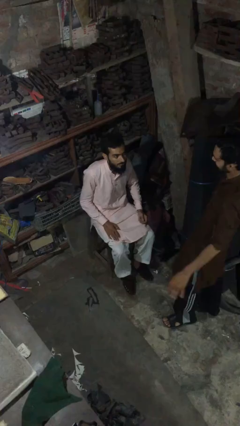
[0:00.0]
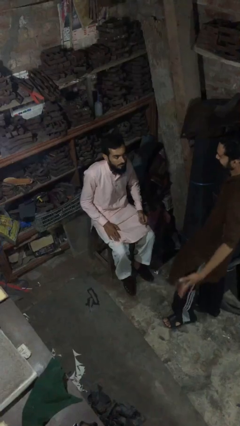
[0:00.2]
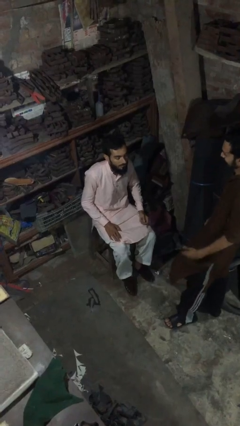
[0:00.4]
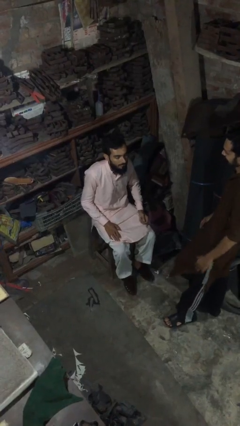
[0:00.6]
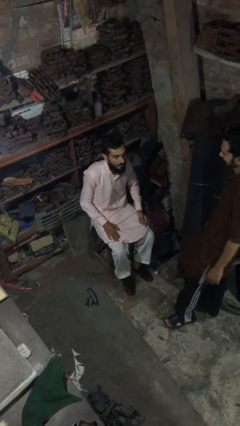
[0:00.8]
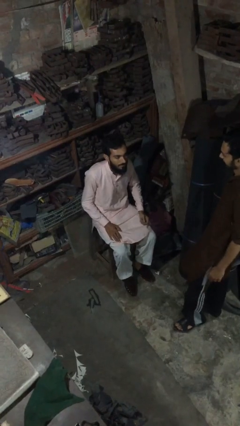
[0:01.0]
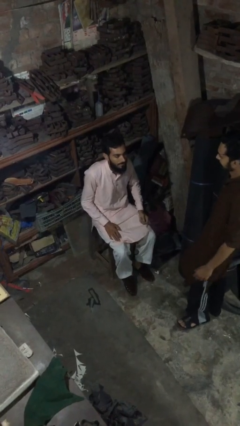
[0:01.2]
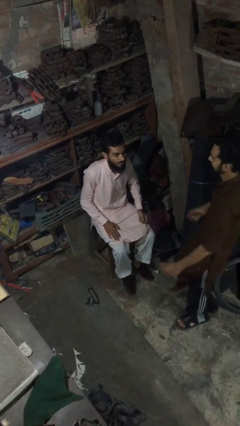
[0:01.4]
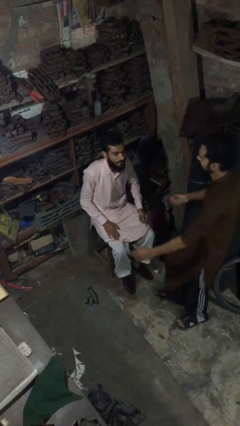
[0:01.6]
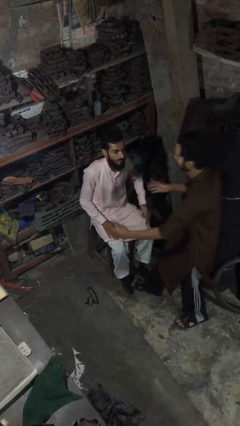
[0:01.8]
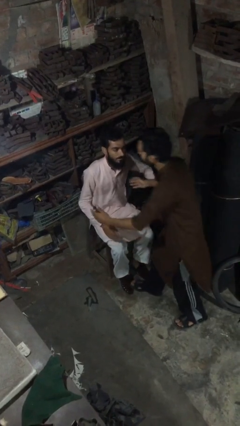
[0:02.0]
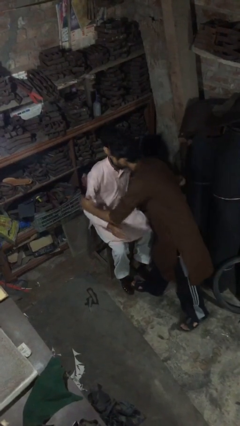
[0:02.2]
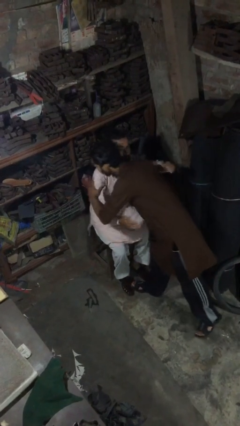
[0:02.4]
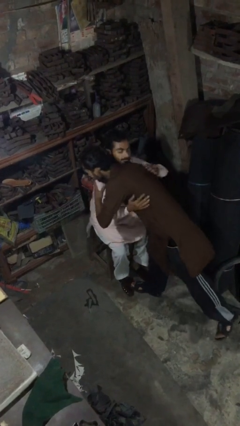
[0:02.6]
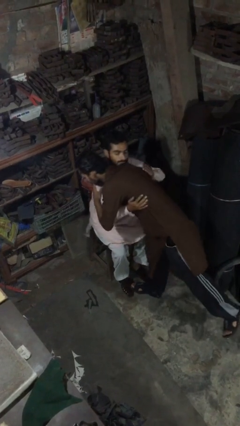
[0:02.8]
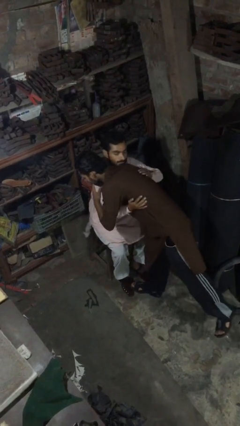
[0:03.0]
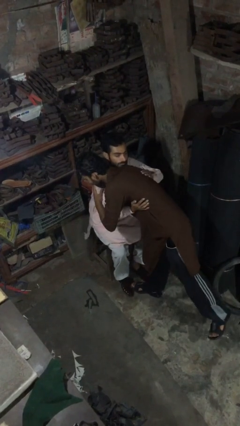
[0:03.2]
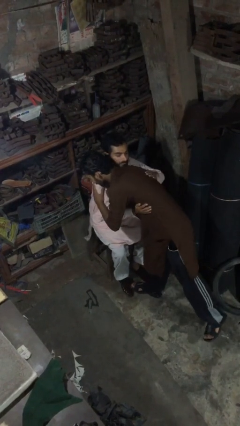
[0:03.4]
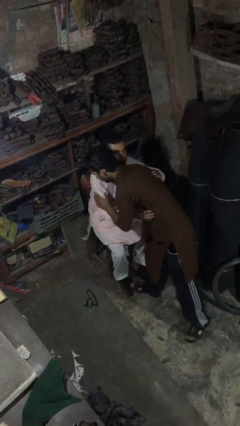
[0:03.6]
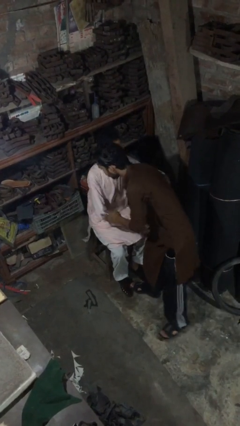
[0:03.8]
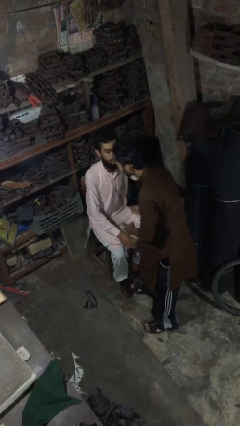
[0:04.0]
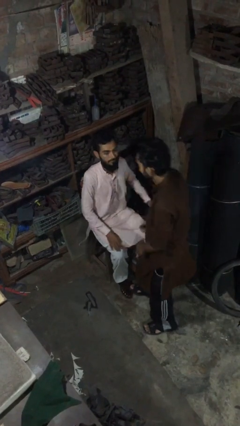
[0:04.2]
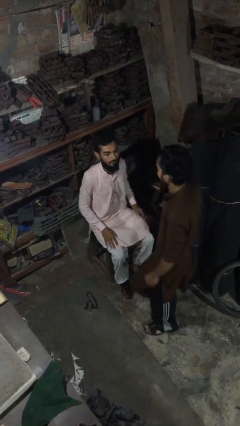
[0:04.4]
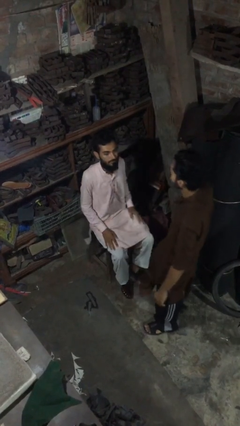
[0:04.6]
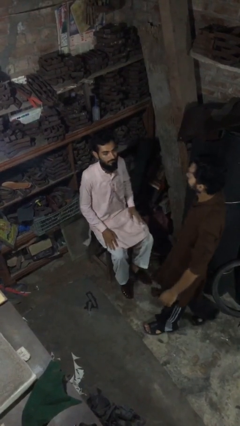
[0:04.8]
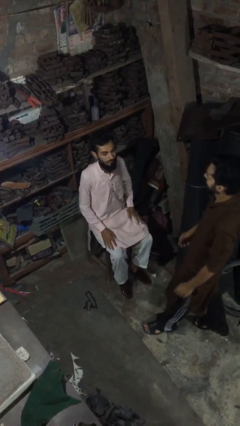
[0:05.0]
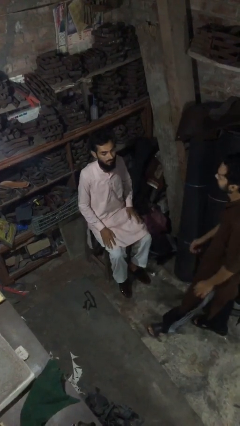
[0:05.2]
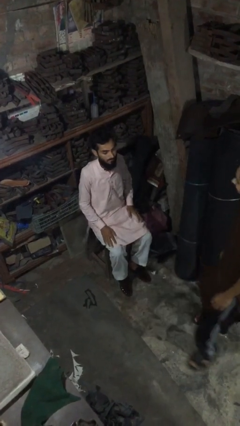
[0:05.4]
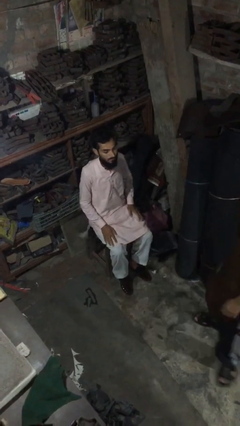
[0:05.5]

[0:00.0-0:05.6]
person embraces person

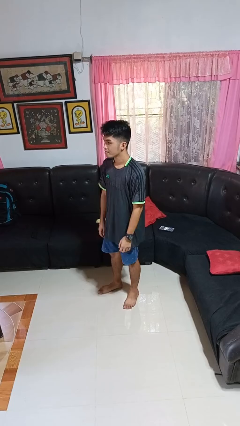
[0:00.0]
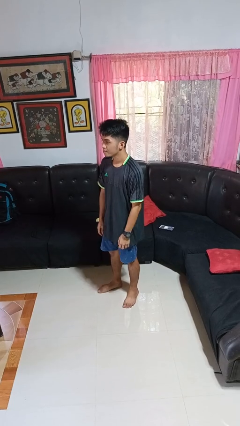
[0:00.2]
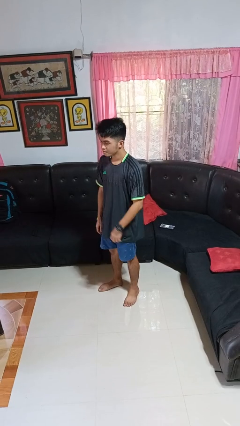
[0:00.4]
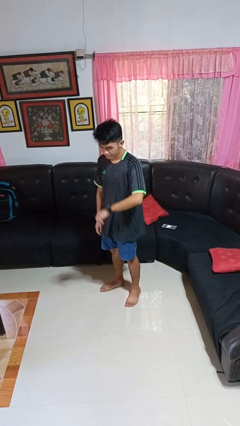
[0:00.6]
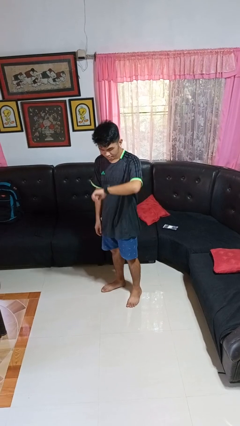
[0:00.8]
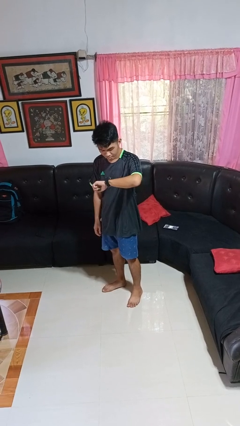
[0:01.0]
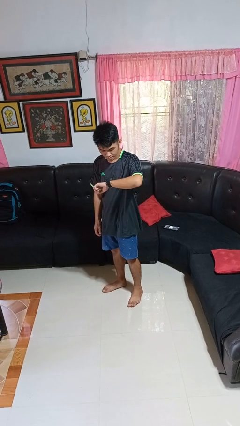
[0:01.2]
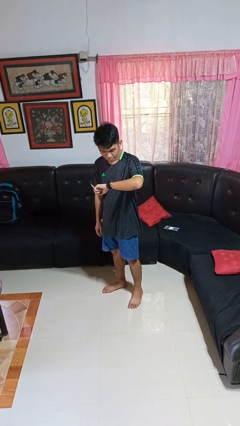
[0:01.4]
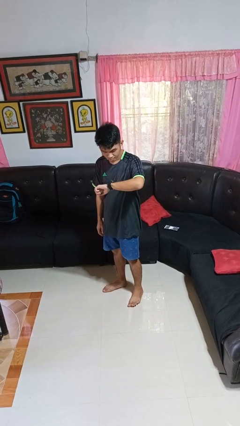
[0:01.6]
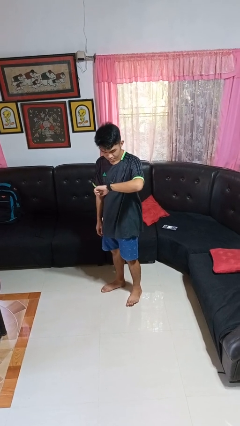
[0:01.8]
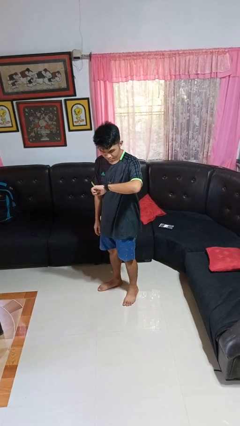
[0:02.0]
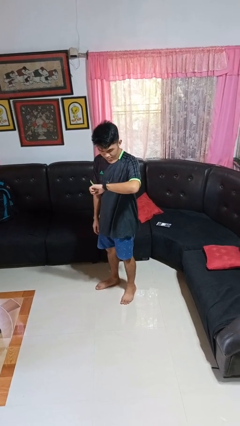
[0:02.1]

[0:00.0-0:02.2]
person looks at wristwatch

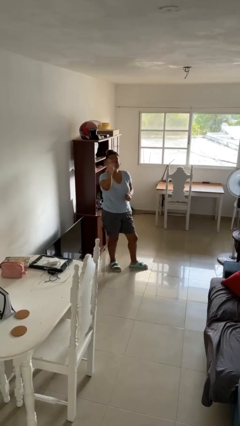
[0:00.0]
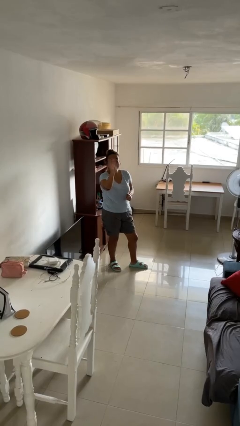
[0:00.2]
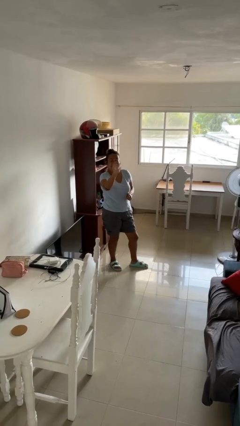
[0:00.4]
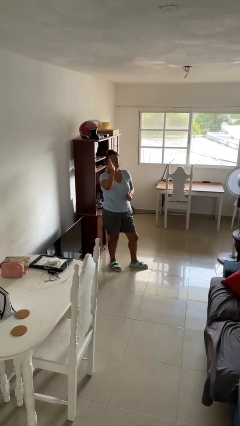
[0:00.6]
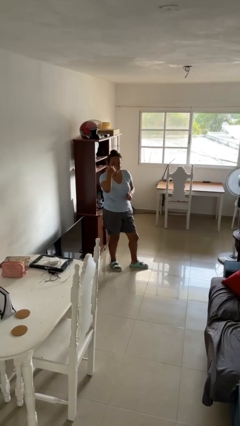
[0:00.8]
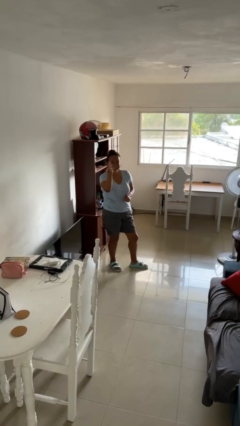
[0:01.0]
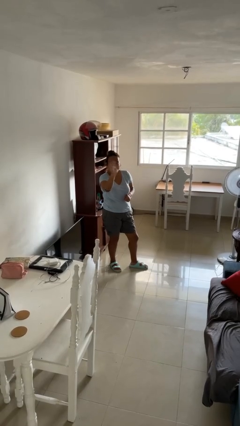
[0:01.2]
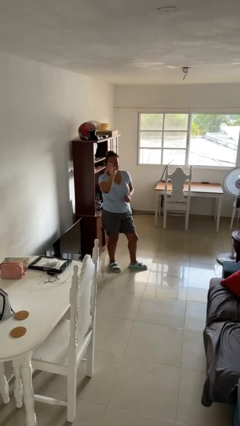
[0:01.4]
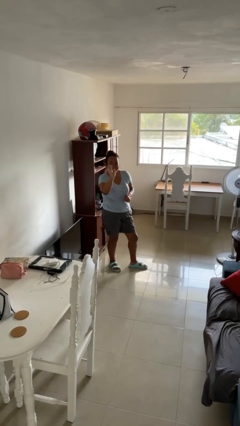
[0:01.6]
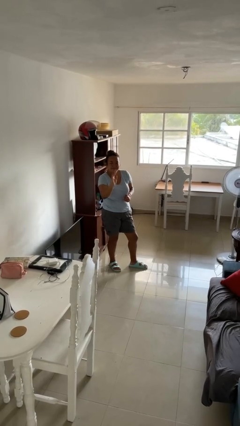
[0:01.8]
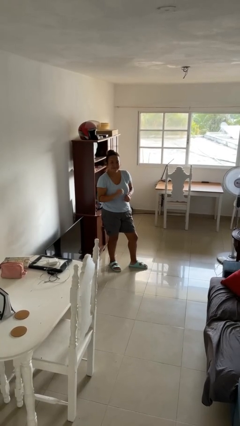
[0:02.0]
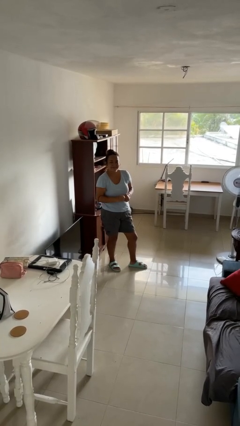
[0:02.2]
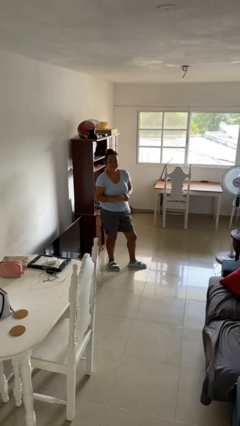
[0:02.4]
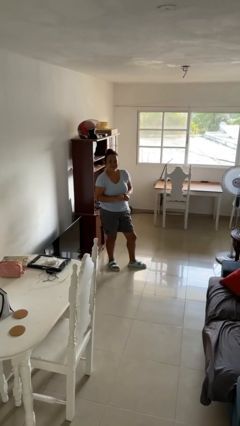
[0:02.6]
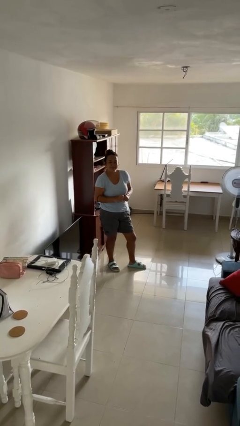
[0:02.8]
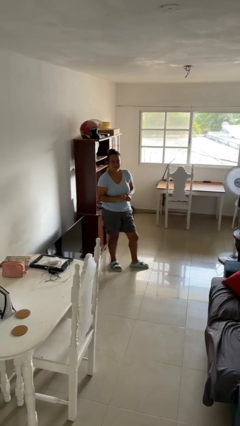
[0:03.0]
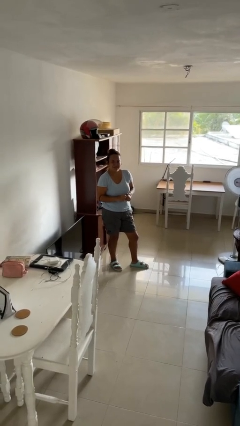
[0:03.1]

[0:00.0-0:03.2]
person waves at person

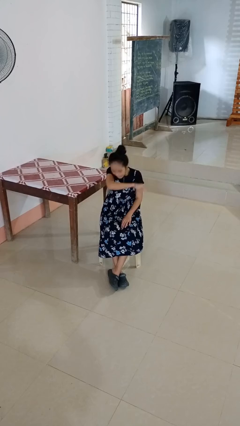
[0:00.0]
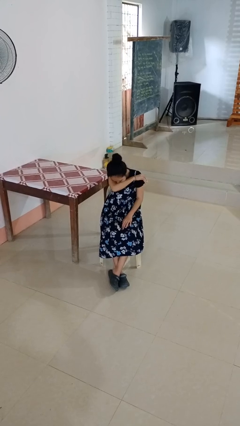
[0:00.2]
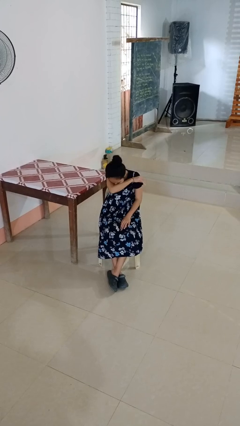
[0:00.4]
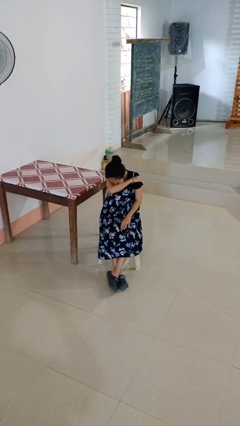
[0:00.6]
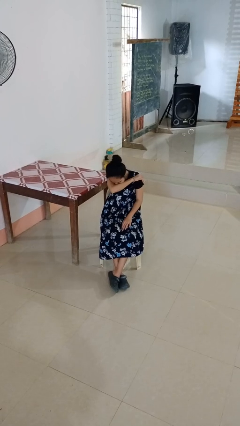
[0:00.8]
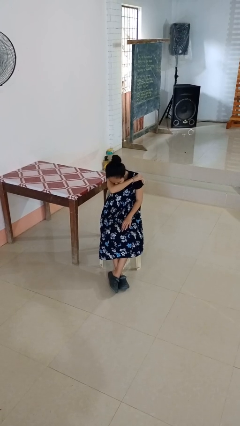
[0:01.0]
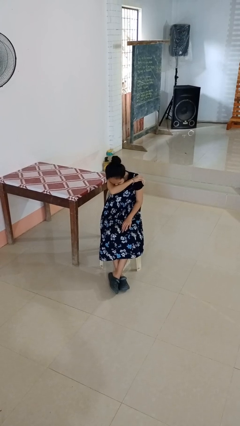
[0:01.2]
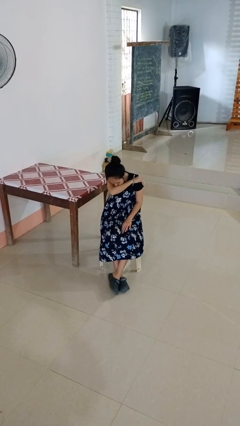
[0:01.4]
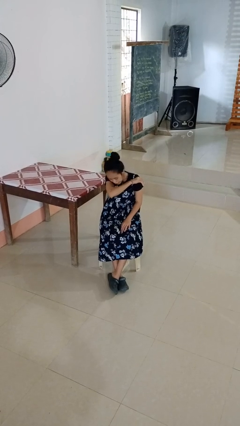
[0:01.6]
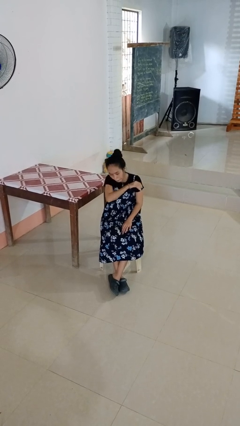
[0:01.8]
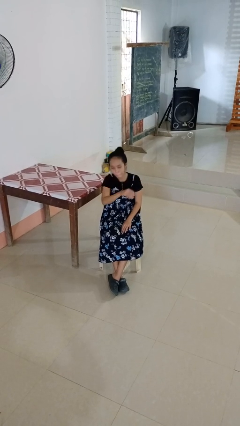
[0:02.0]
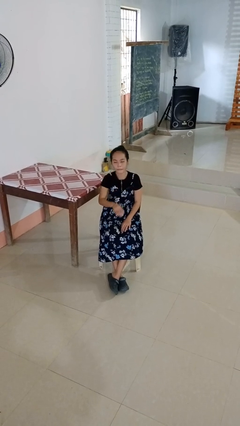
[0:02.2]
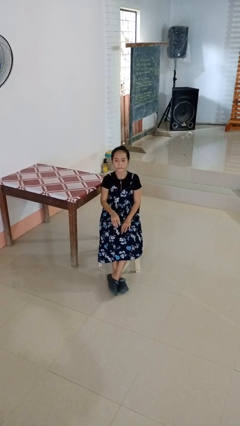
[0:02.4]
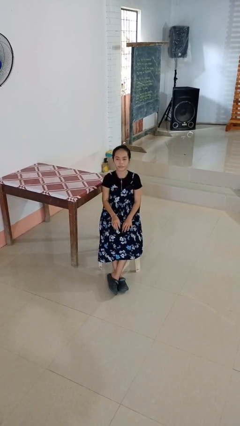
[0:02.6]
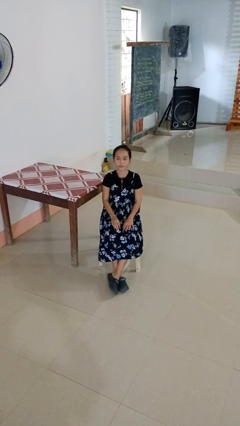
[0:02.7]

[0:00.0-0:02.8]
person sneezes into arm

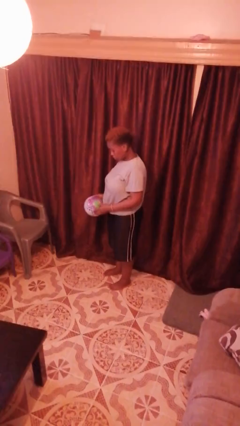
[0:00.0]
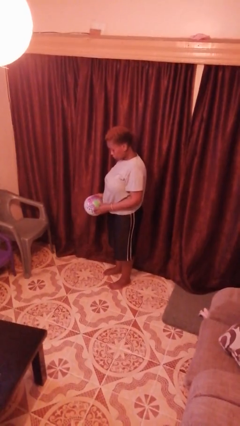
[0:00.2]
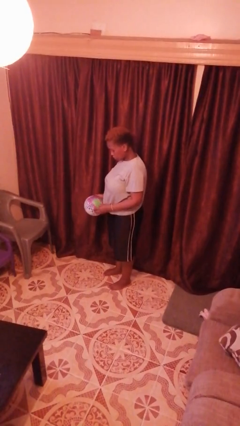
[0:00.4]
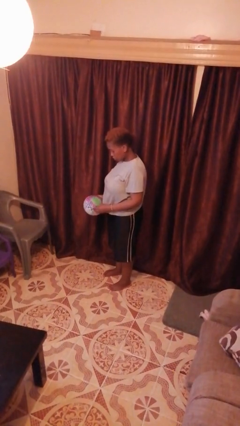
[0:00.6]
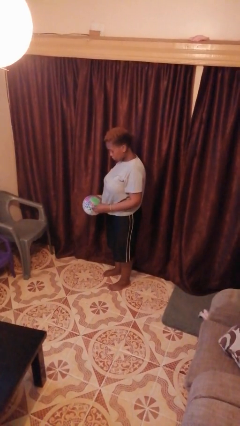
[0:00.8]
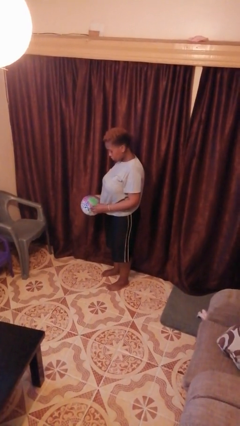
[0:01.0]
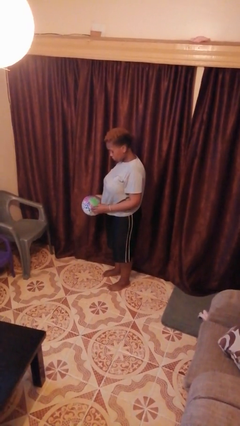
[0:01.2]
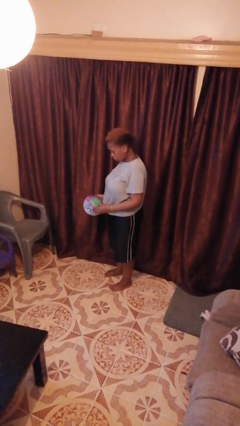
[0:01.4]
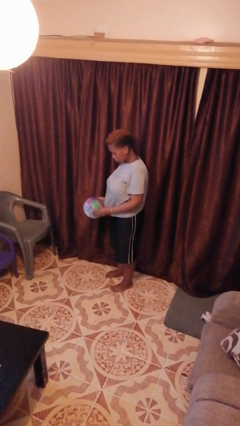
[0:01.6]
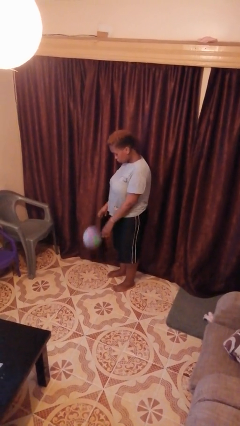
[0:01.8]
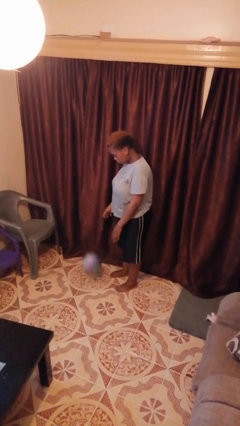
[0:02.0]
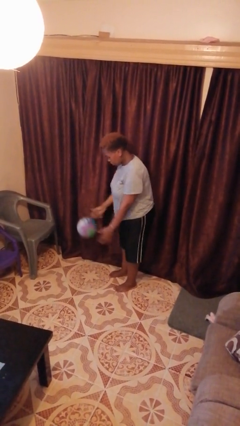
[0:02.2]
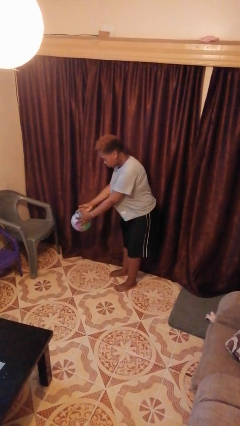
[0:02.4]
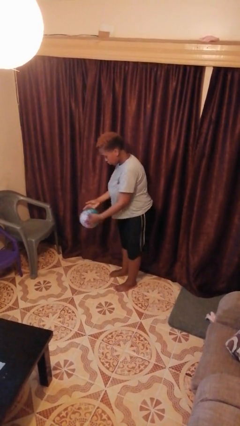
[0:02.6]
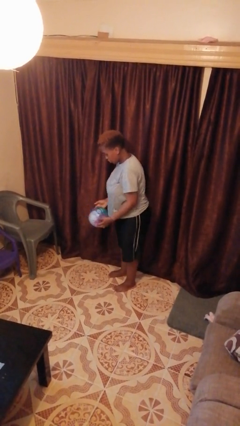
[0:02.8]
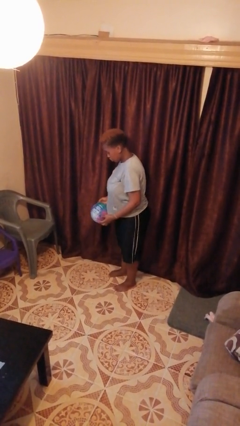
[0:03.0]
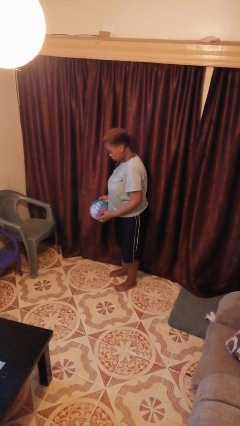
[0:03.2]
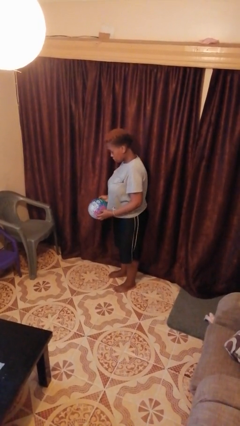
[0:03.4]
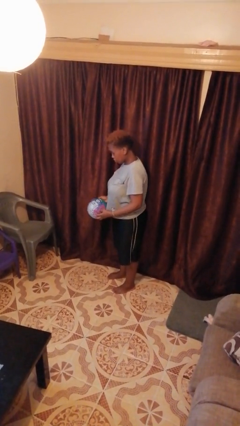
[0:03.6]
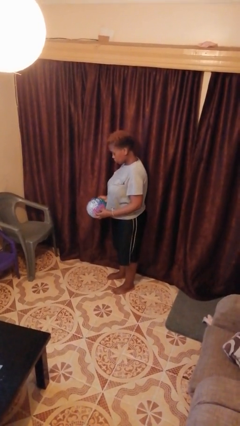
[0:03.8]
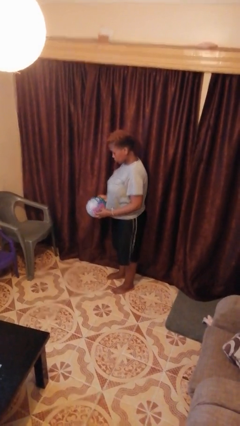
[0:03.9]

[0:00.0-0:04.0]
person bounces ball on floor
